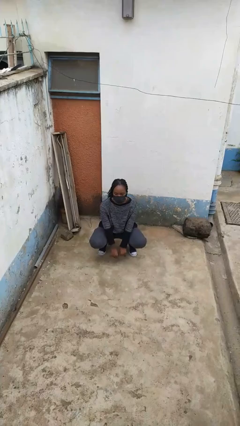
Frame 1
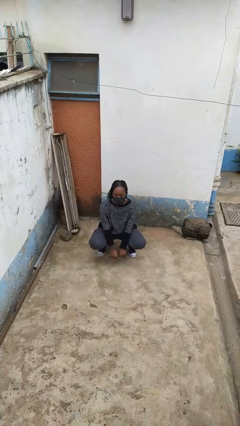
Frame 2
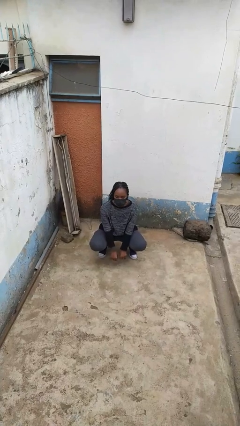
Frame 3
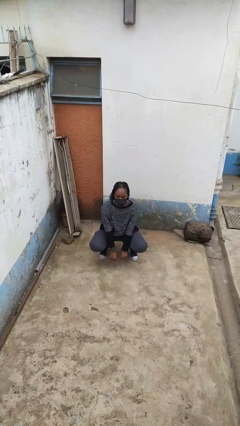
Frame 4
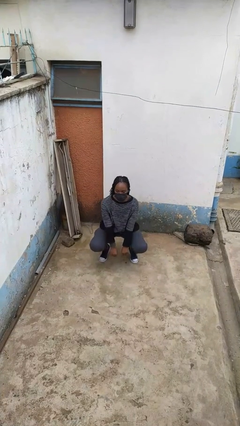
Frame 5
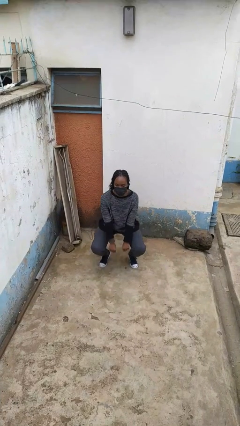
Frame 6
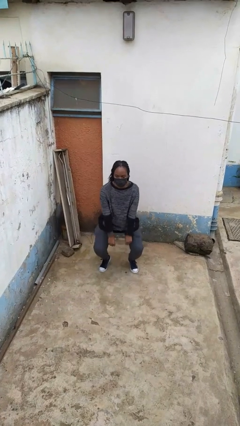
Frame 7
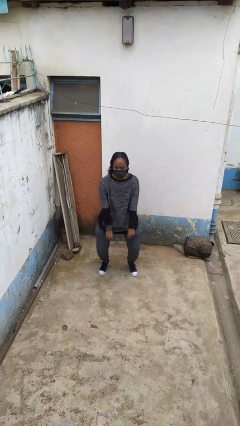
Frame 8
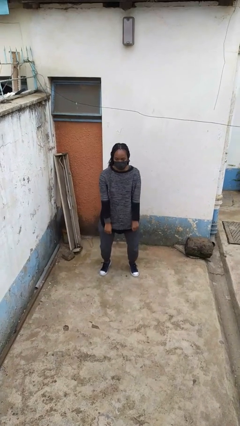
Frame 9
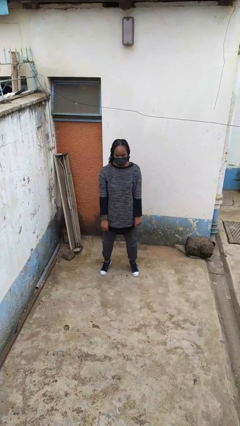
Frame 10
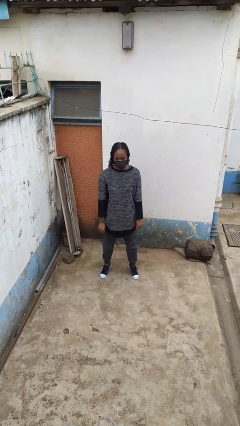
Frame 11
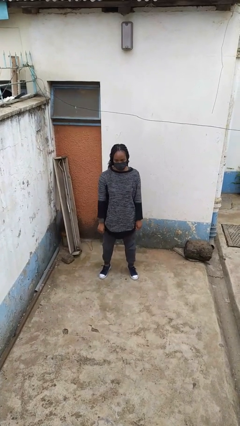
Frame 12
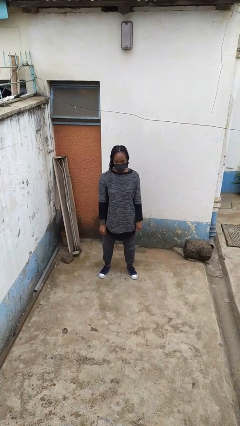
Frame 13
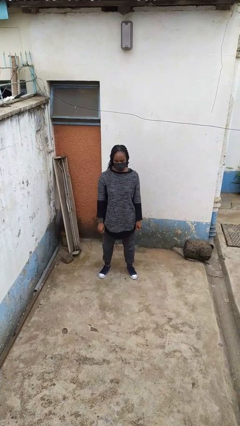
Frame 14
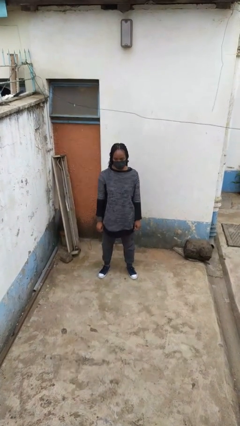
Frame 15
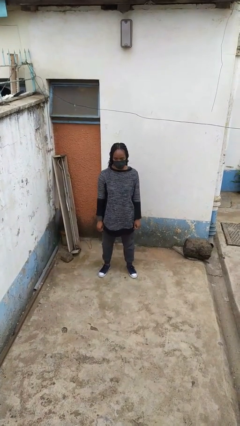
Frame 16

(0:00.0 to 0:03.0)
person stands up

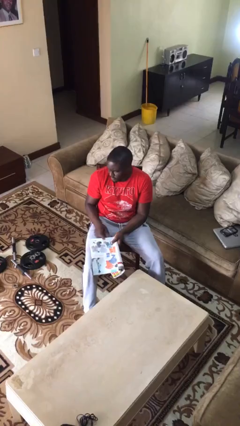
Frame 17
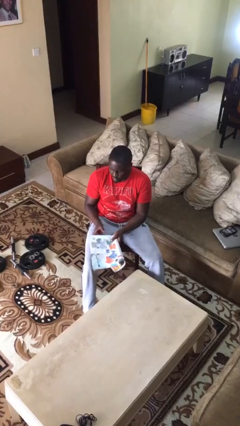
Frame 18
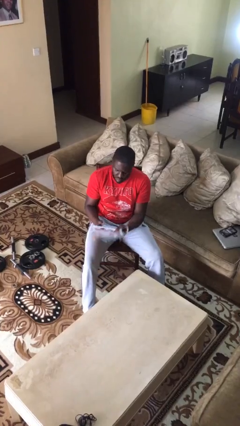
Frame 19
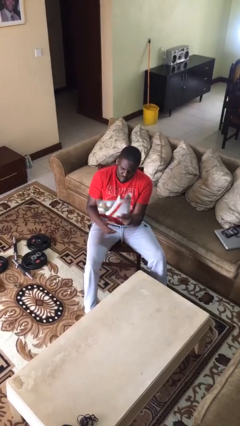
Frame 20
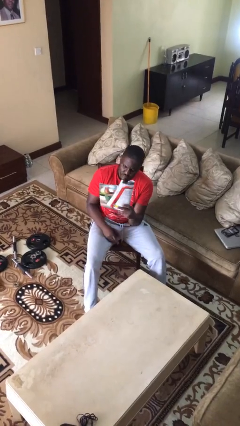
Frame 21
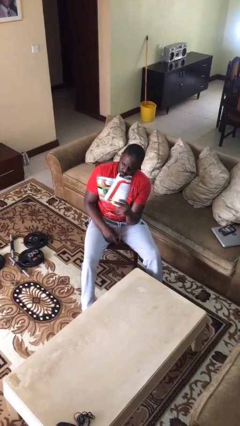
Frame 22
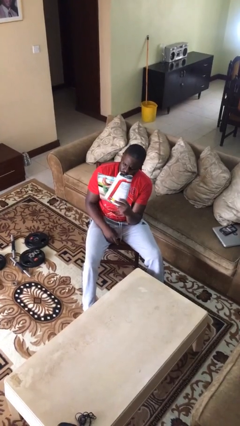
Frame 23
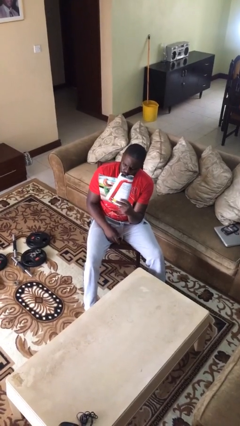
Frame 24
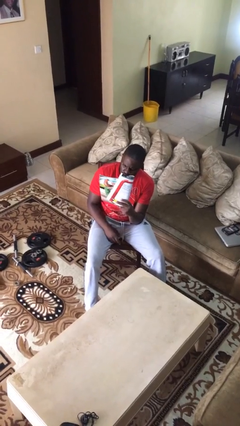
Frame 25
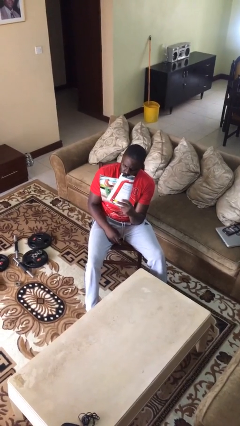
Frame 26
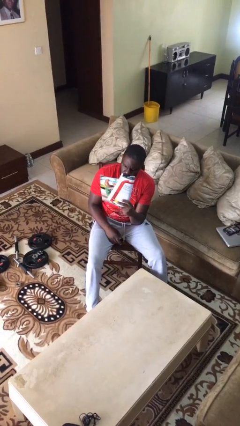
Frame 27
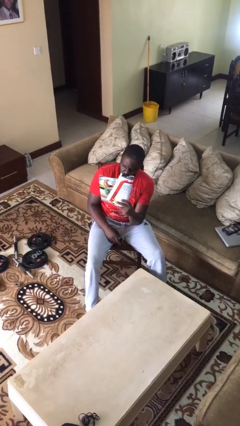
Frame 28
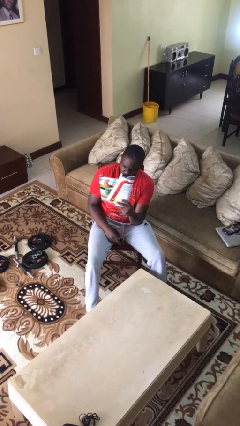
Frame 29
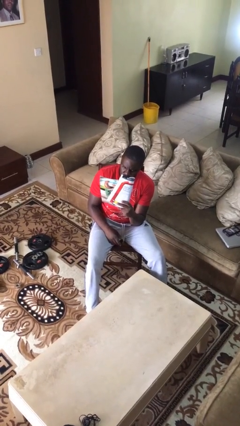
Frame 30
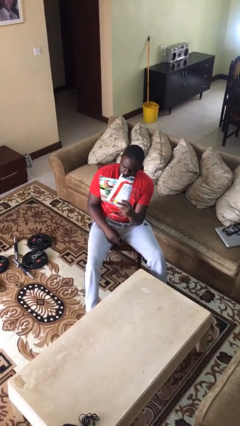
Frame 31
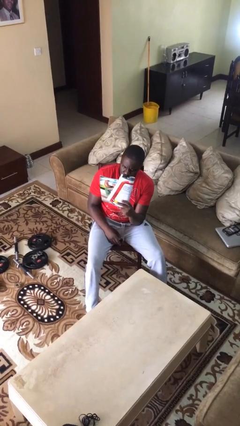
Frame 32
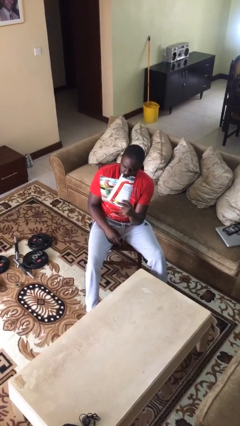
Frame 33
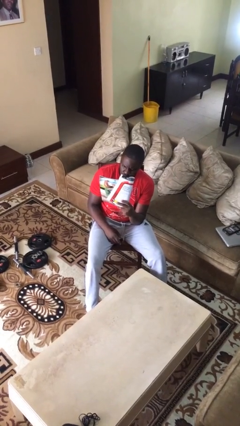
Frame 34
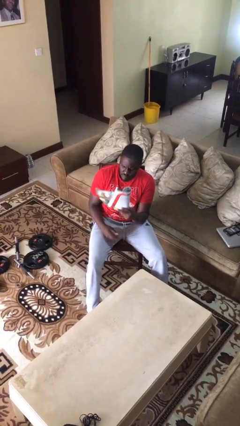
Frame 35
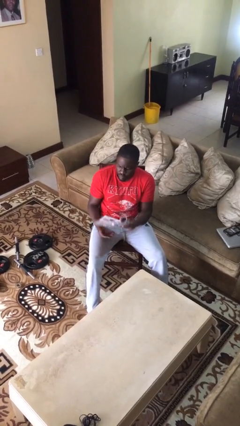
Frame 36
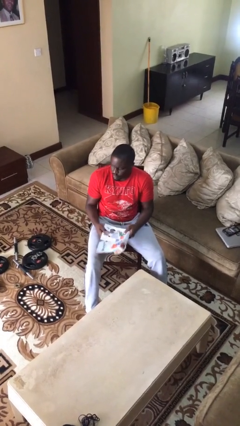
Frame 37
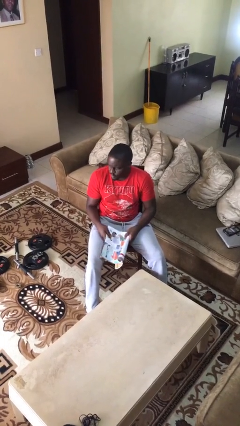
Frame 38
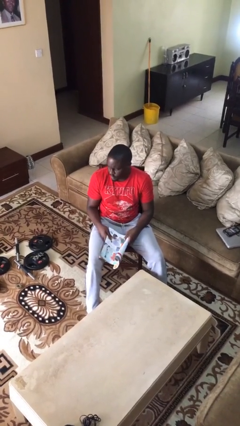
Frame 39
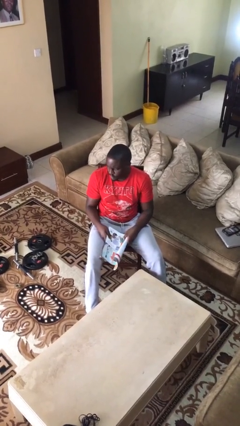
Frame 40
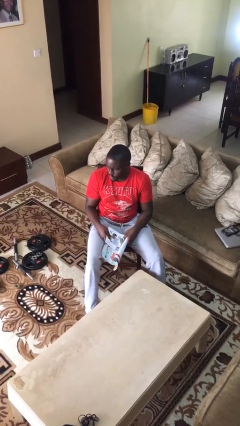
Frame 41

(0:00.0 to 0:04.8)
person reads document

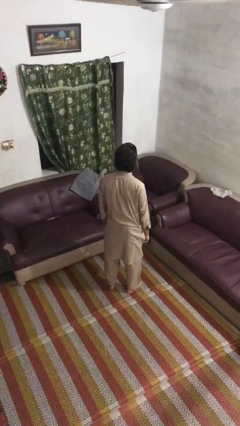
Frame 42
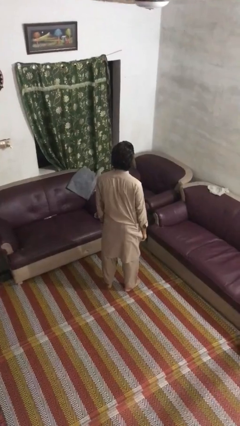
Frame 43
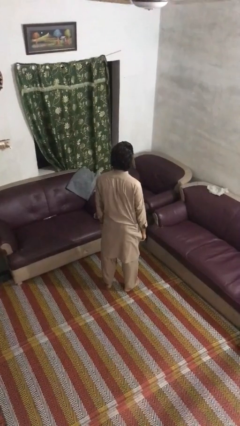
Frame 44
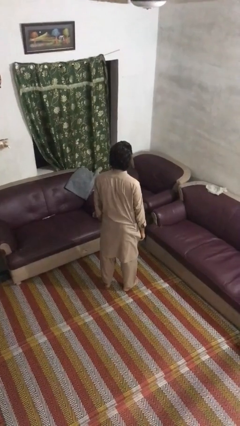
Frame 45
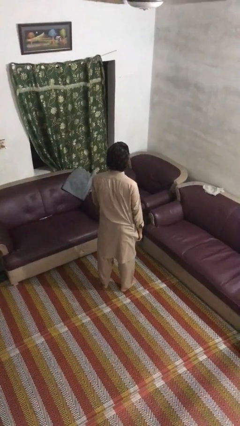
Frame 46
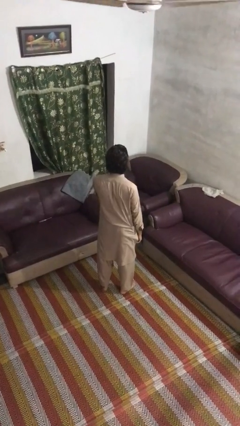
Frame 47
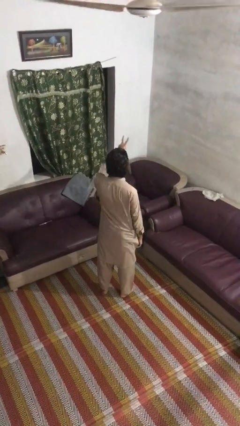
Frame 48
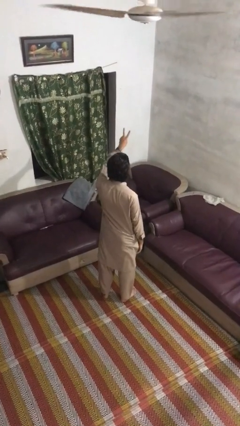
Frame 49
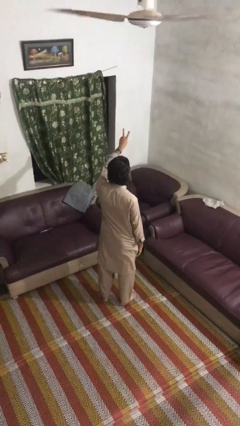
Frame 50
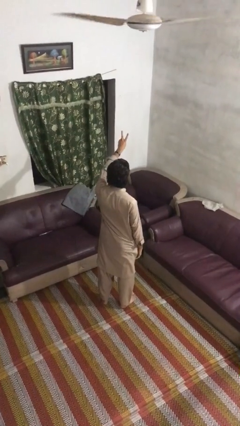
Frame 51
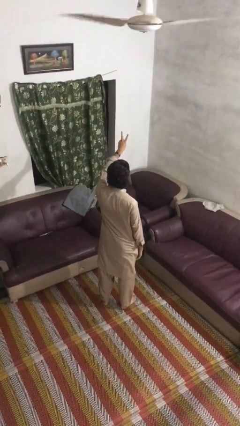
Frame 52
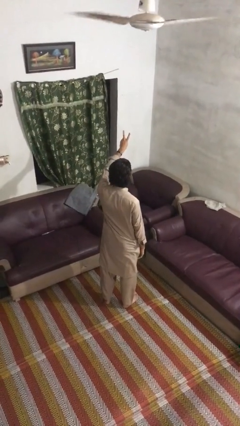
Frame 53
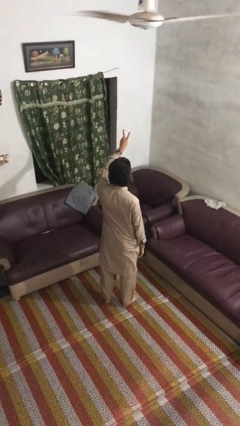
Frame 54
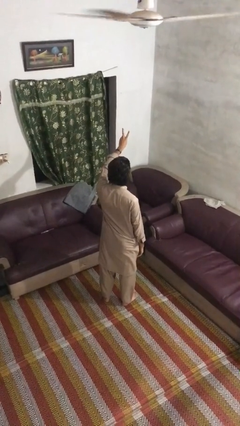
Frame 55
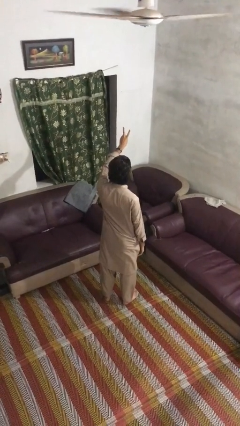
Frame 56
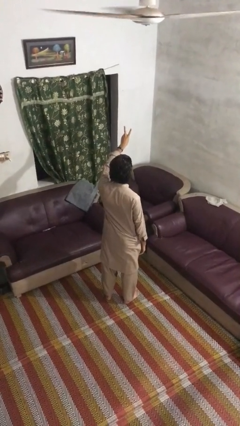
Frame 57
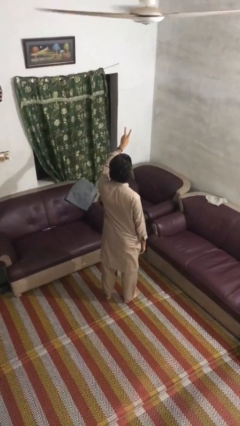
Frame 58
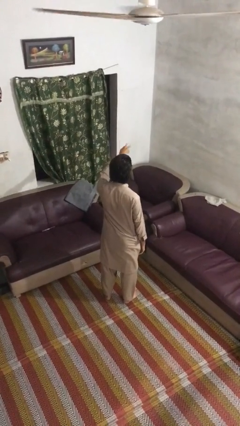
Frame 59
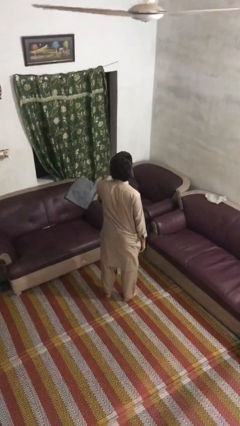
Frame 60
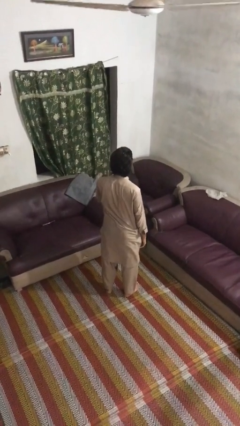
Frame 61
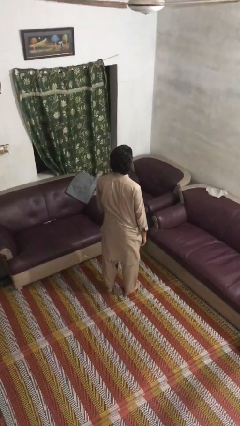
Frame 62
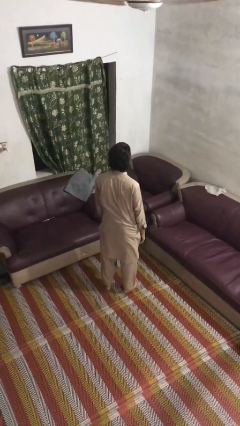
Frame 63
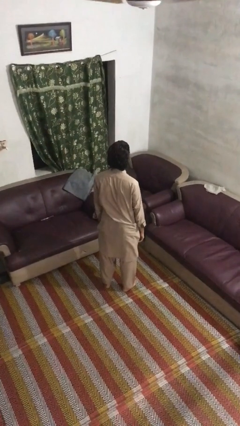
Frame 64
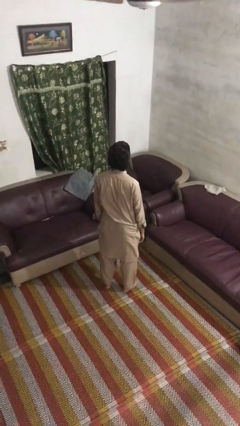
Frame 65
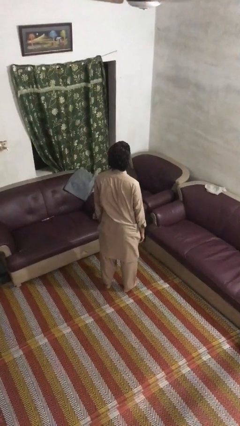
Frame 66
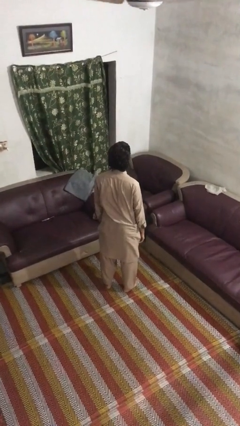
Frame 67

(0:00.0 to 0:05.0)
person gestures peace

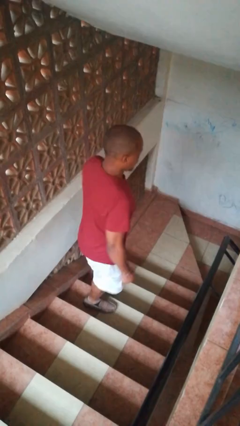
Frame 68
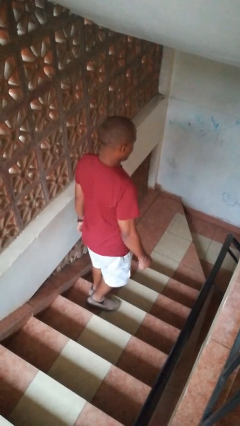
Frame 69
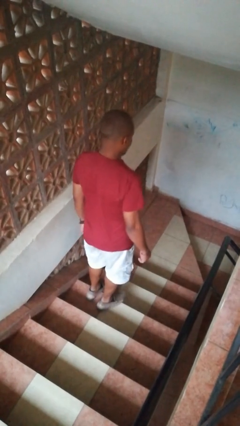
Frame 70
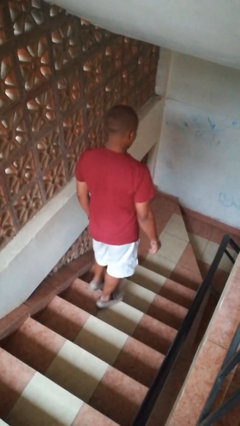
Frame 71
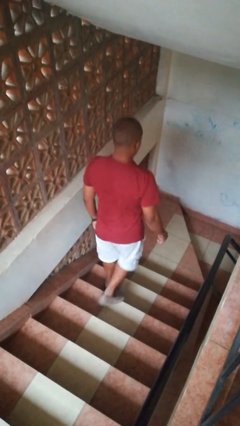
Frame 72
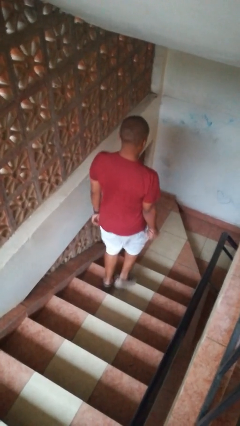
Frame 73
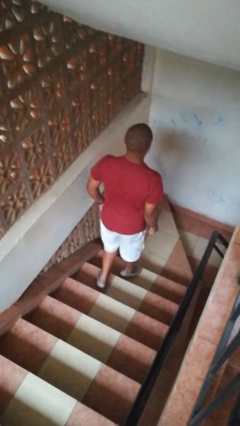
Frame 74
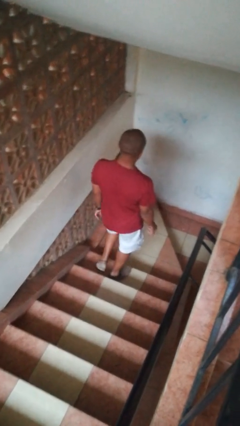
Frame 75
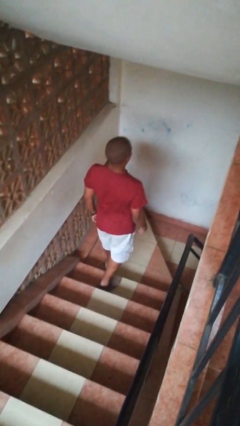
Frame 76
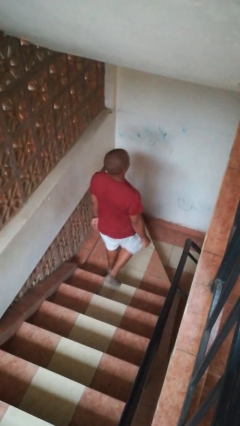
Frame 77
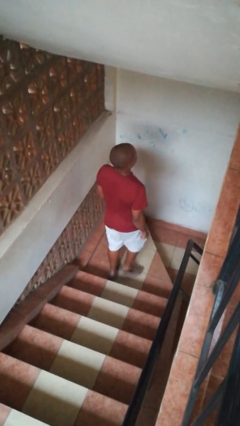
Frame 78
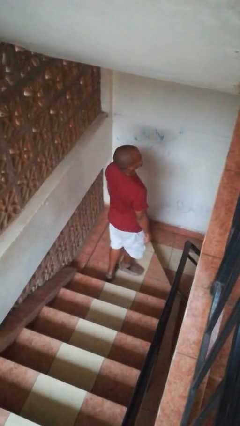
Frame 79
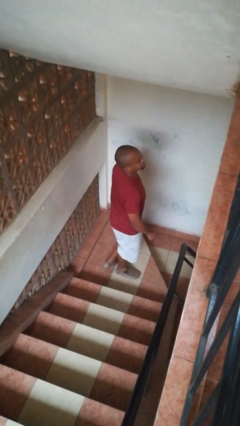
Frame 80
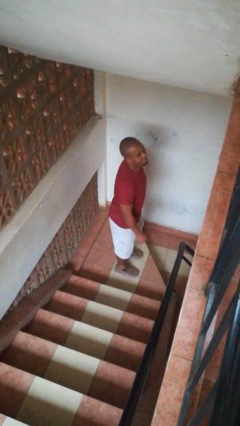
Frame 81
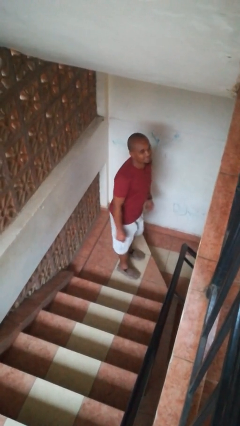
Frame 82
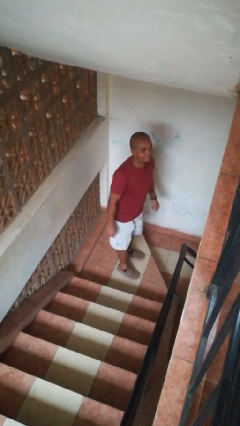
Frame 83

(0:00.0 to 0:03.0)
person climbs down stairs

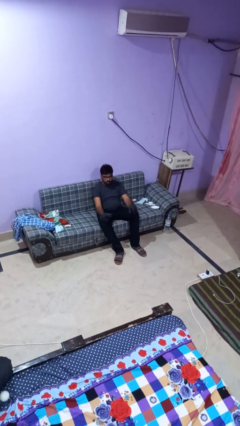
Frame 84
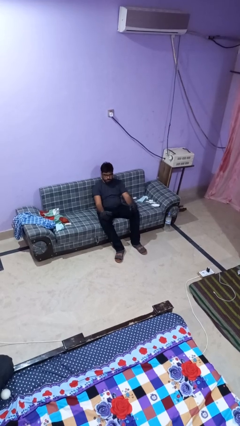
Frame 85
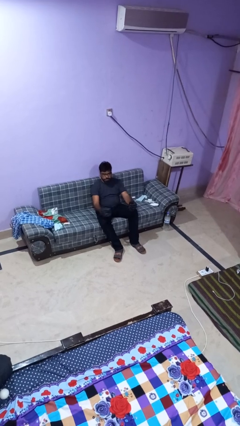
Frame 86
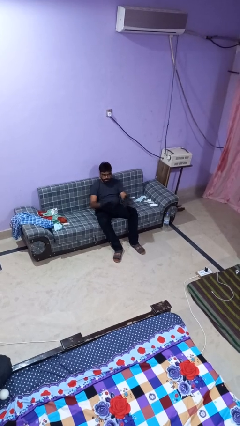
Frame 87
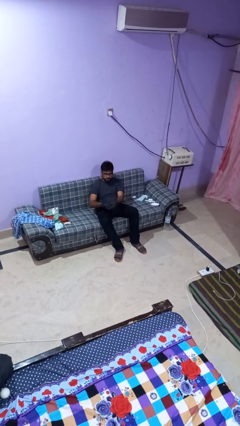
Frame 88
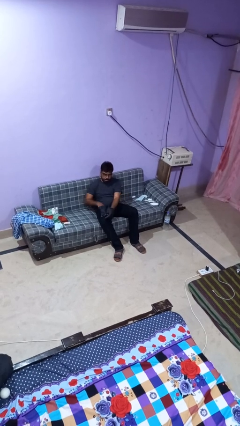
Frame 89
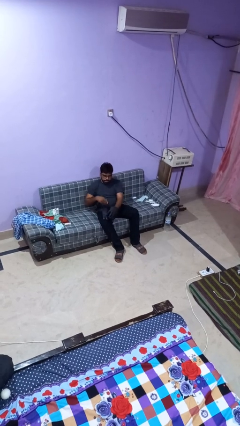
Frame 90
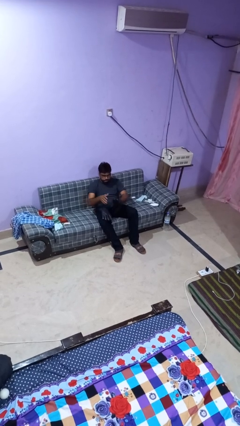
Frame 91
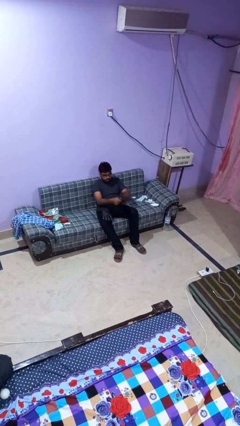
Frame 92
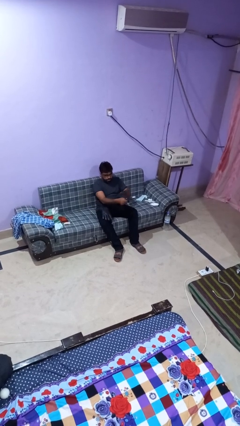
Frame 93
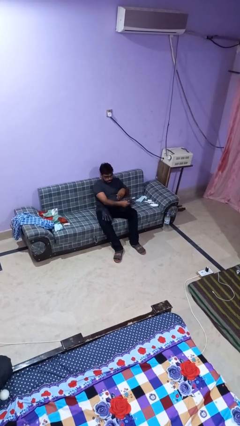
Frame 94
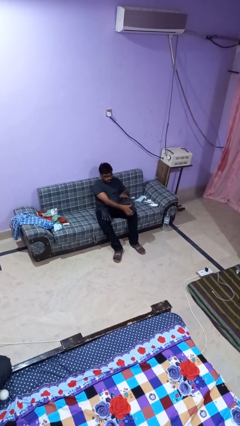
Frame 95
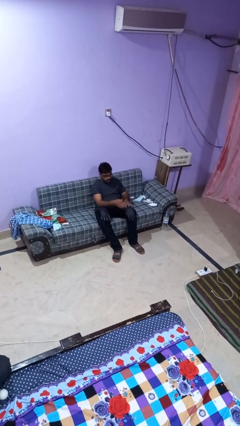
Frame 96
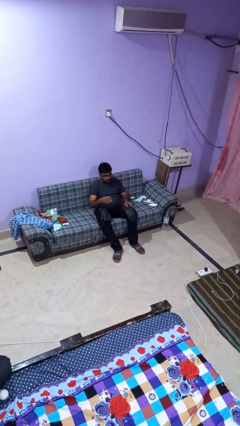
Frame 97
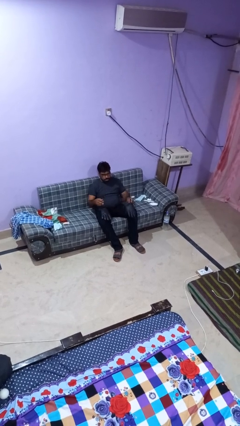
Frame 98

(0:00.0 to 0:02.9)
person takes off gloves
